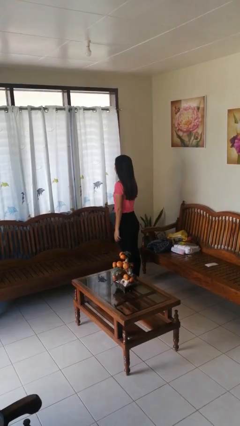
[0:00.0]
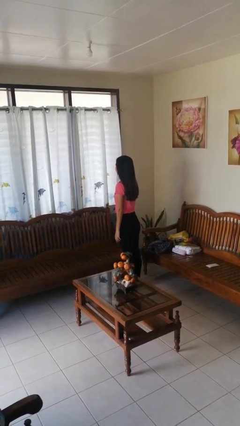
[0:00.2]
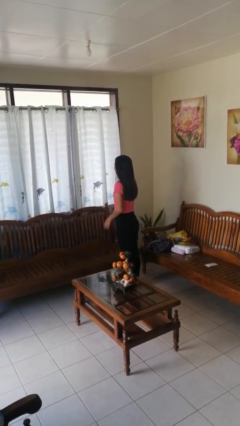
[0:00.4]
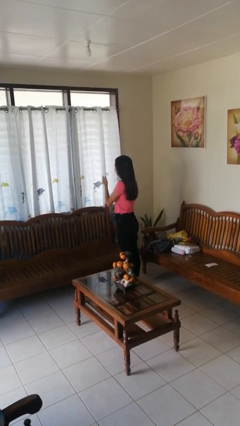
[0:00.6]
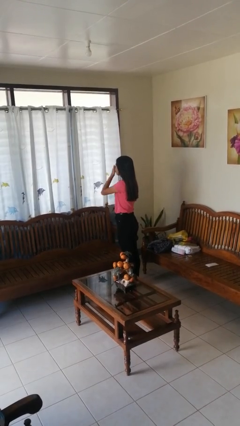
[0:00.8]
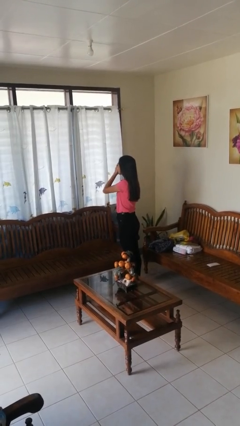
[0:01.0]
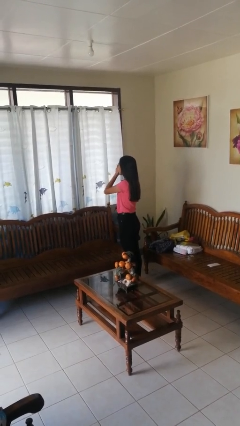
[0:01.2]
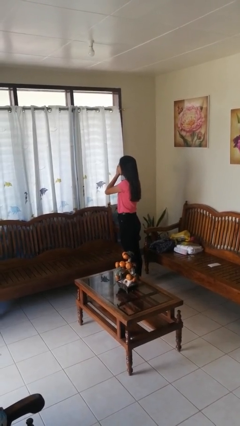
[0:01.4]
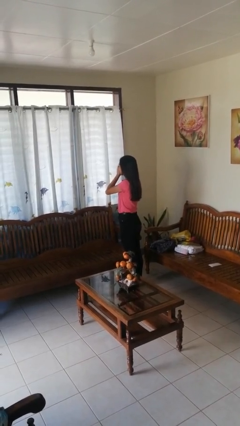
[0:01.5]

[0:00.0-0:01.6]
person yawns

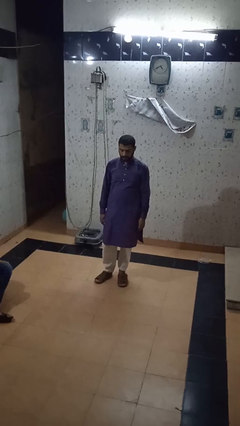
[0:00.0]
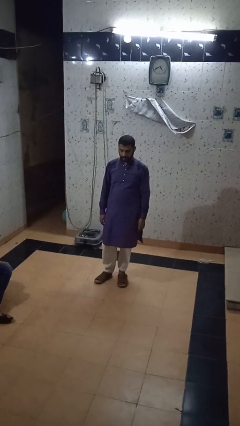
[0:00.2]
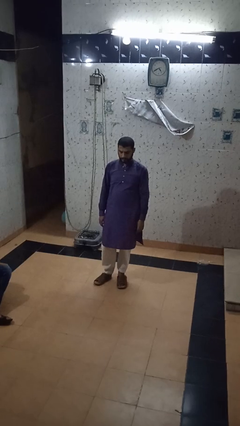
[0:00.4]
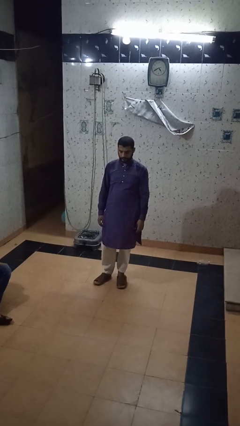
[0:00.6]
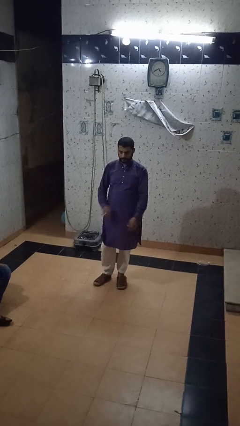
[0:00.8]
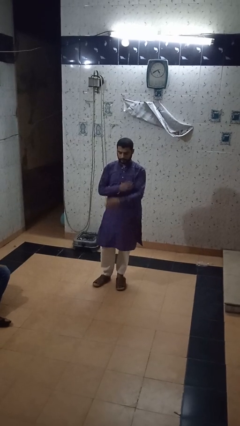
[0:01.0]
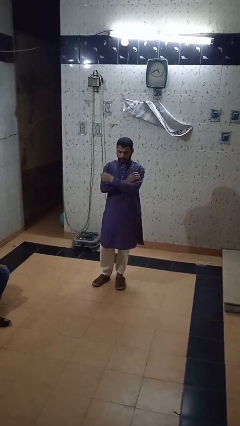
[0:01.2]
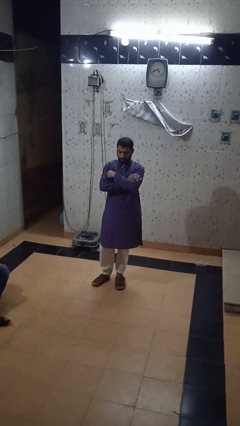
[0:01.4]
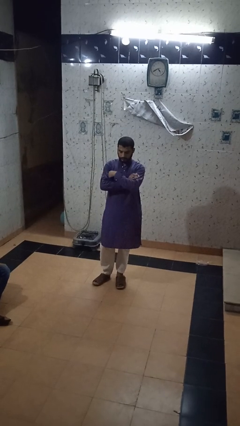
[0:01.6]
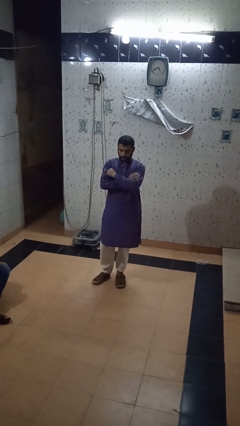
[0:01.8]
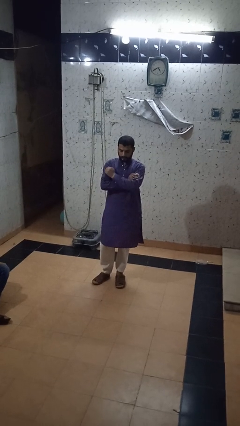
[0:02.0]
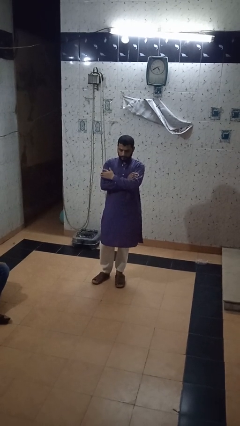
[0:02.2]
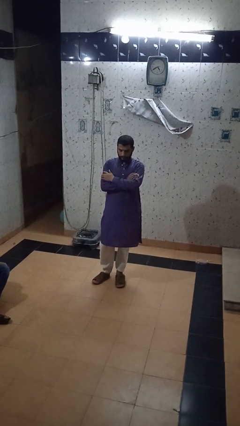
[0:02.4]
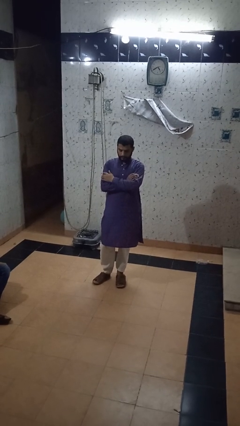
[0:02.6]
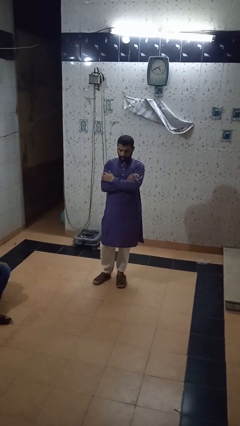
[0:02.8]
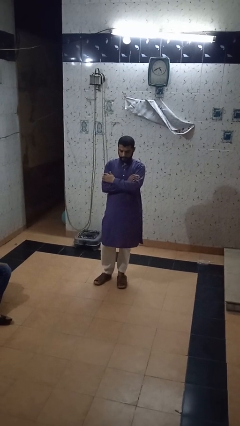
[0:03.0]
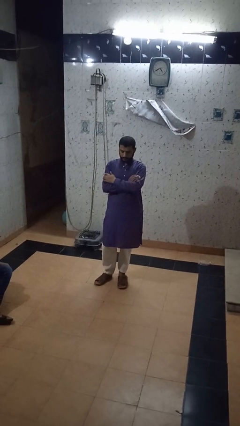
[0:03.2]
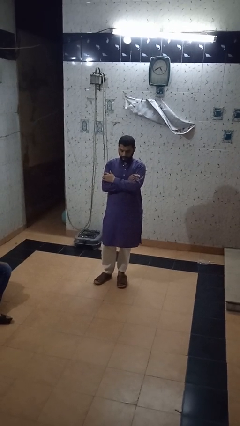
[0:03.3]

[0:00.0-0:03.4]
person crosses arms

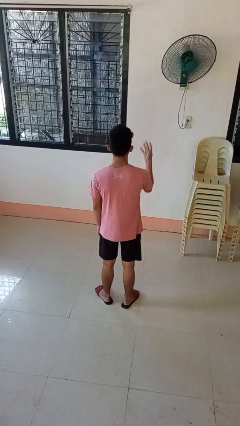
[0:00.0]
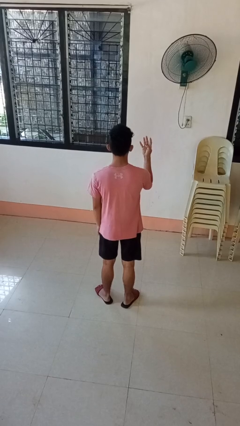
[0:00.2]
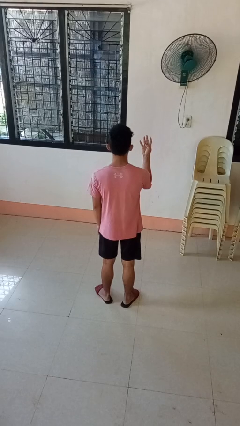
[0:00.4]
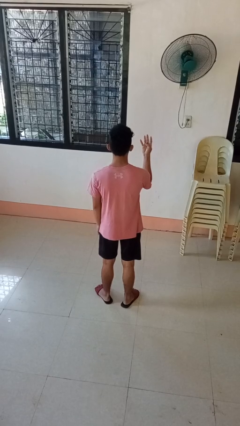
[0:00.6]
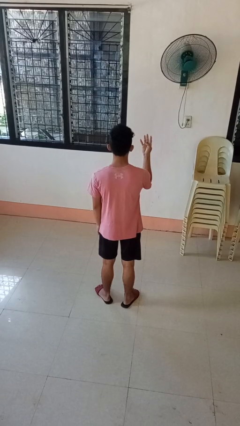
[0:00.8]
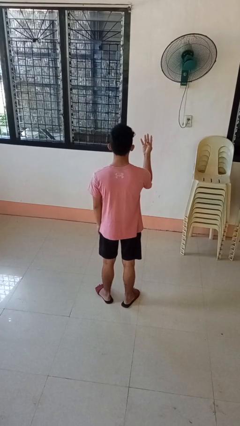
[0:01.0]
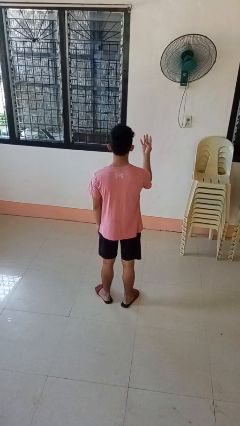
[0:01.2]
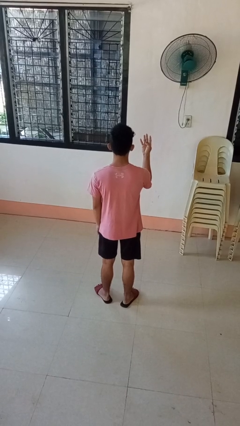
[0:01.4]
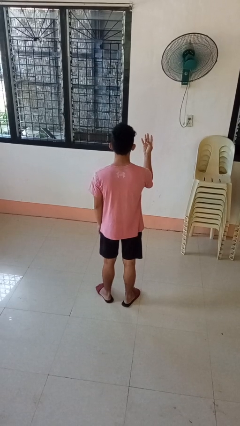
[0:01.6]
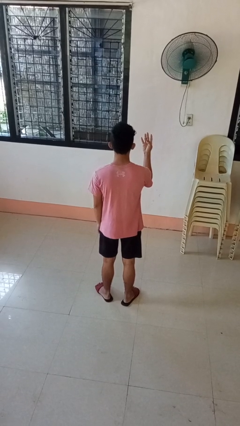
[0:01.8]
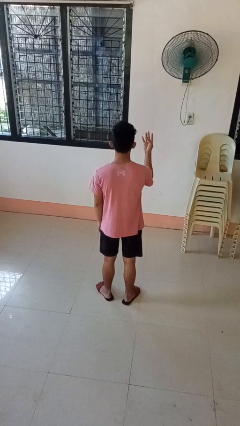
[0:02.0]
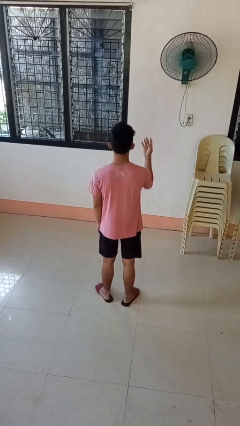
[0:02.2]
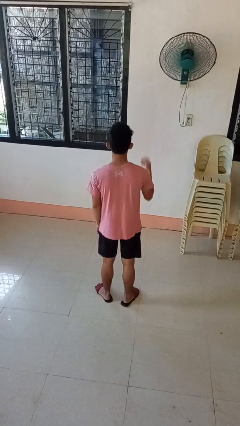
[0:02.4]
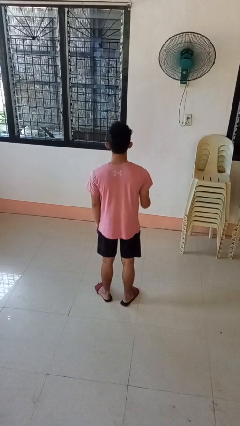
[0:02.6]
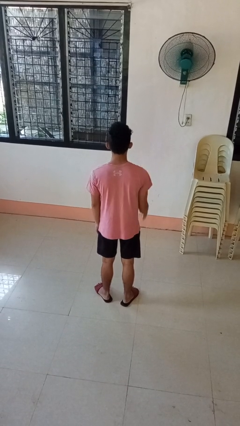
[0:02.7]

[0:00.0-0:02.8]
person gestures number four

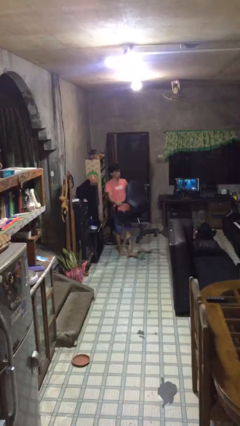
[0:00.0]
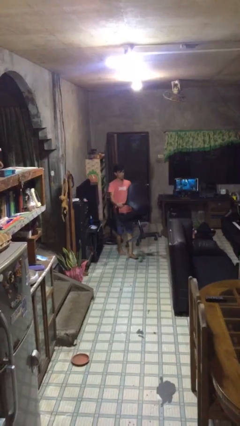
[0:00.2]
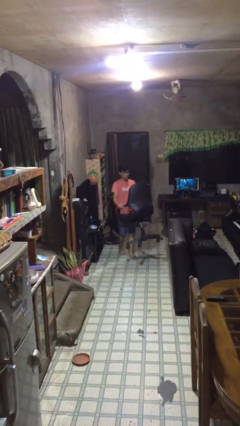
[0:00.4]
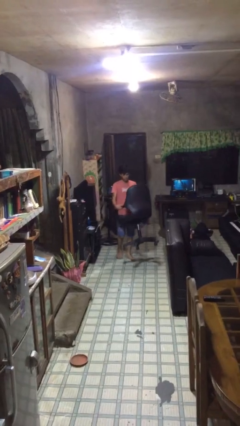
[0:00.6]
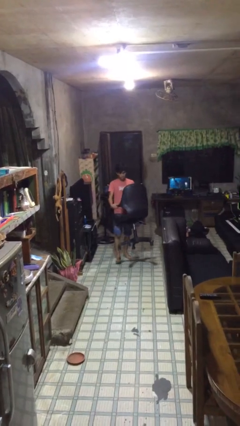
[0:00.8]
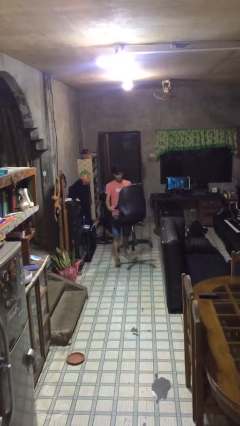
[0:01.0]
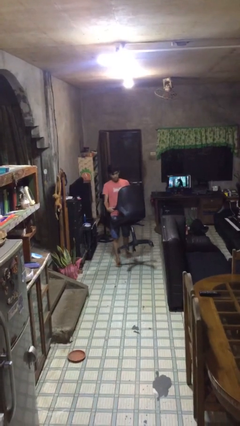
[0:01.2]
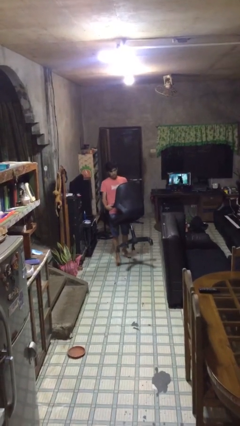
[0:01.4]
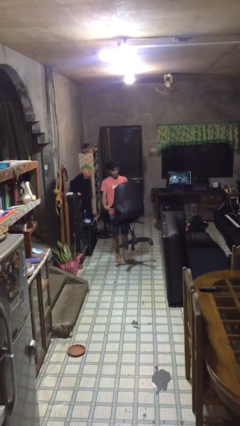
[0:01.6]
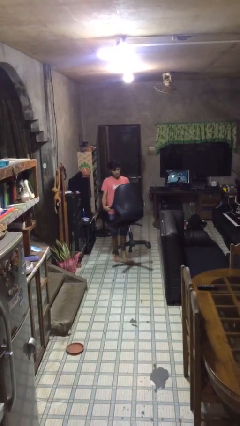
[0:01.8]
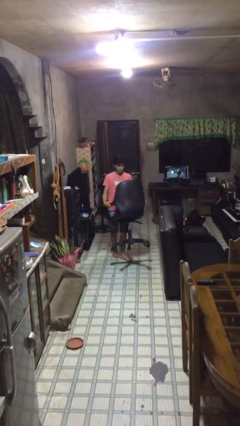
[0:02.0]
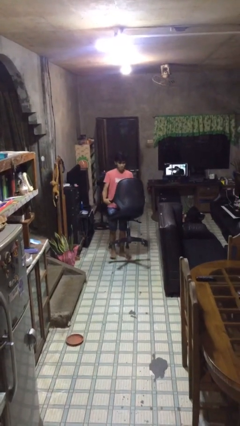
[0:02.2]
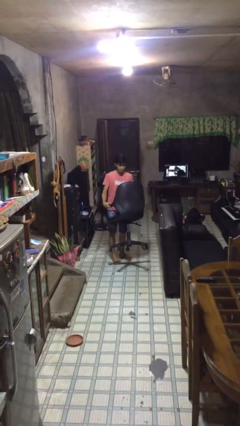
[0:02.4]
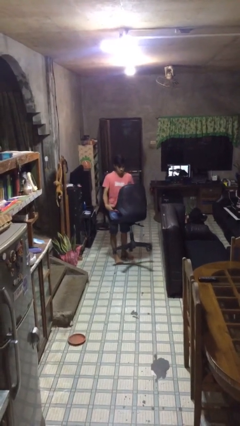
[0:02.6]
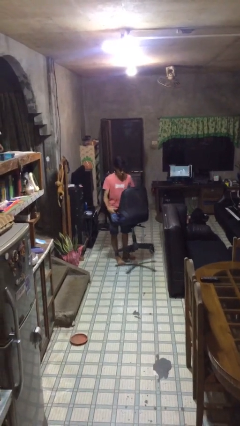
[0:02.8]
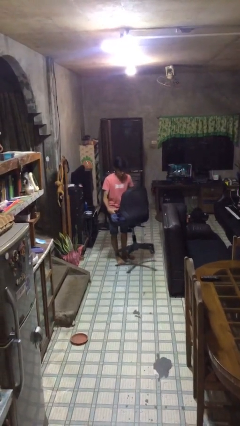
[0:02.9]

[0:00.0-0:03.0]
person carries heavy object

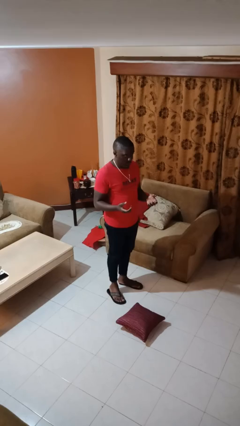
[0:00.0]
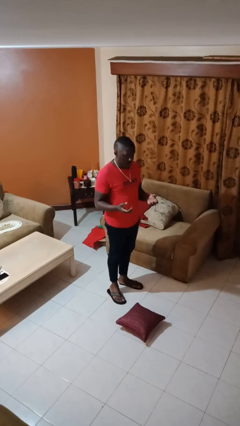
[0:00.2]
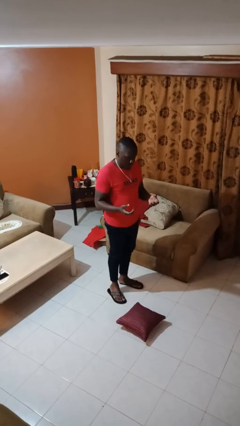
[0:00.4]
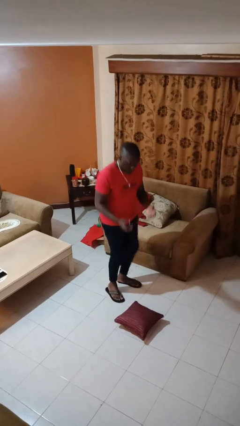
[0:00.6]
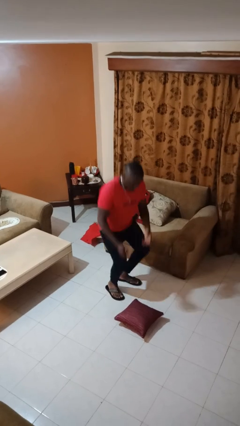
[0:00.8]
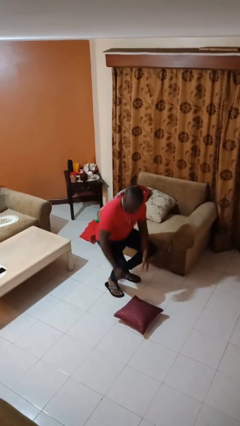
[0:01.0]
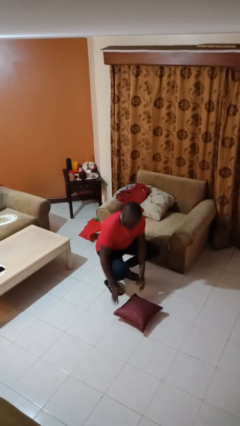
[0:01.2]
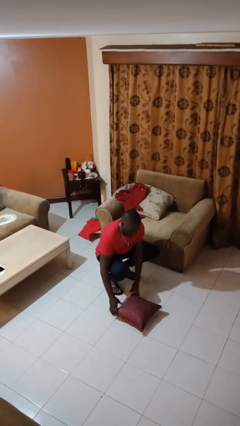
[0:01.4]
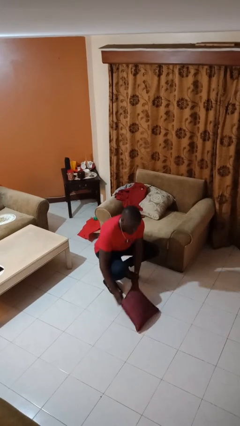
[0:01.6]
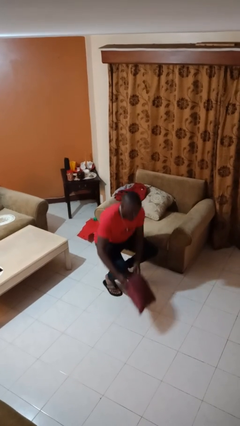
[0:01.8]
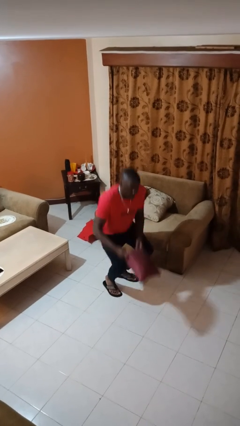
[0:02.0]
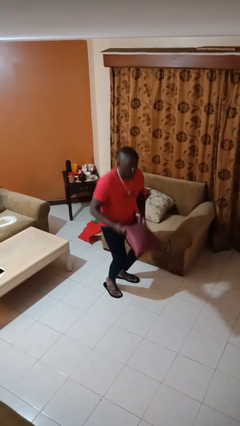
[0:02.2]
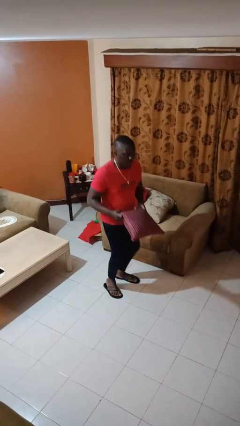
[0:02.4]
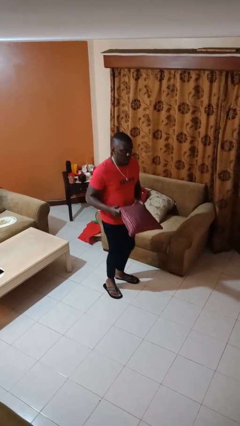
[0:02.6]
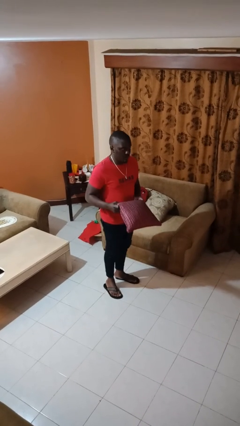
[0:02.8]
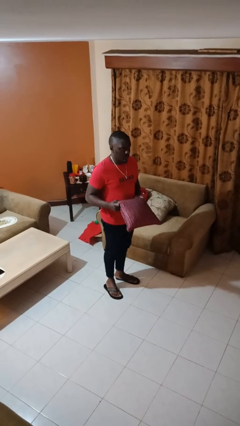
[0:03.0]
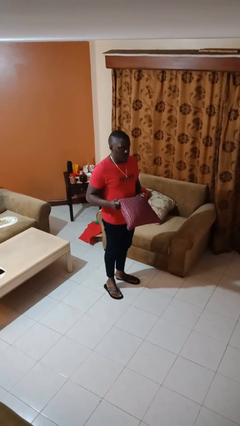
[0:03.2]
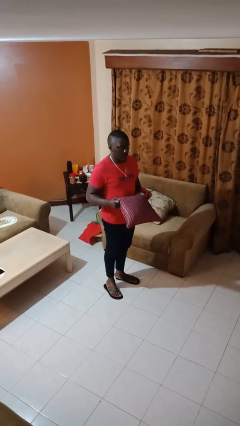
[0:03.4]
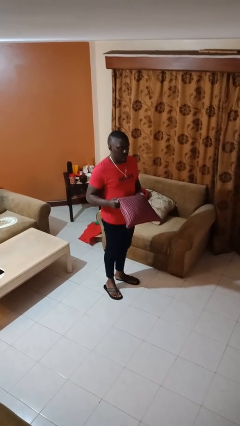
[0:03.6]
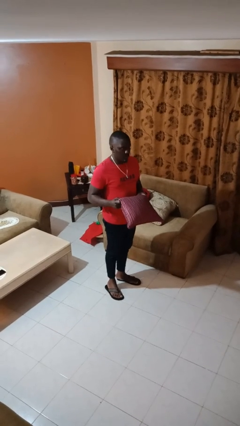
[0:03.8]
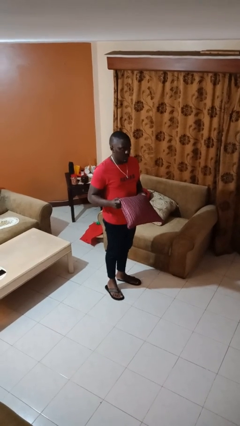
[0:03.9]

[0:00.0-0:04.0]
person picks up object from floor

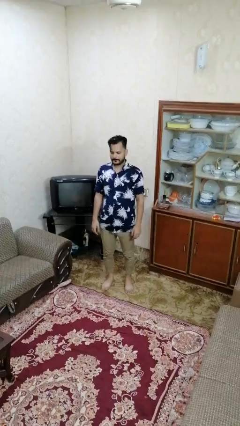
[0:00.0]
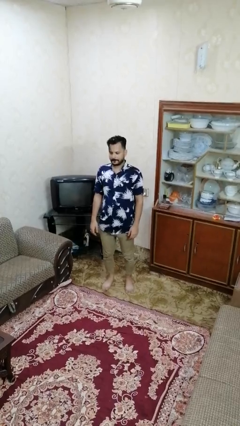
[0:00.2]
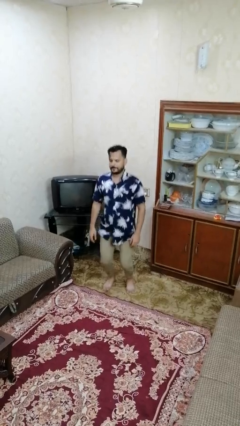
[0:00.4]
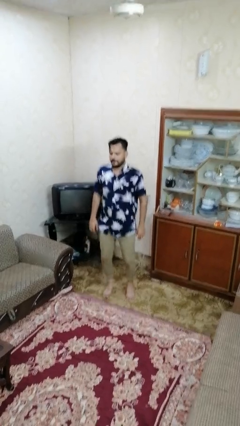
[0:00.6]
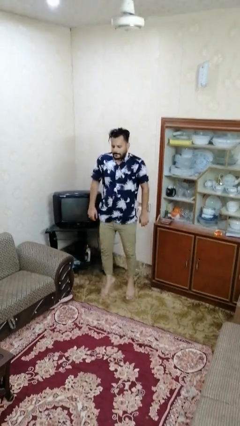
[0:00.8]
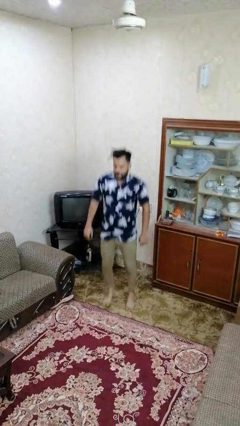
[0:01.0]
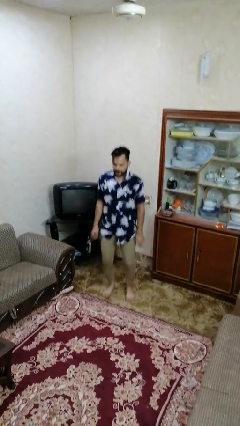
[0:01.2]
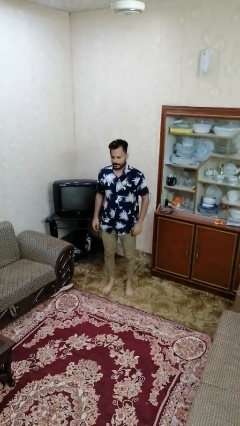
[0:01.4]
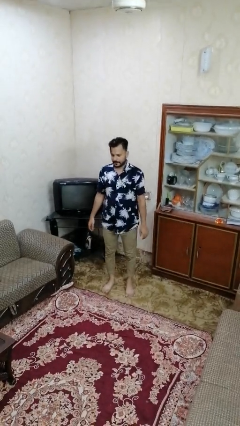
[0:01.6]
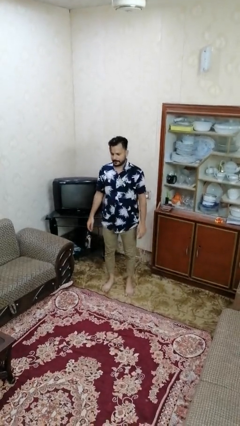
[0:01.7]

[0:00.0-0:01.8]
person jumps

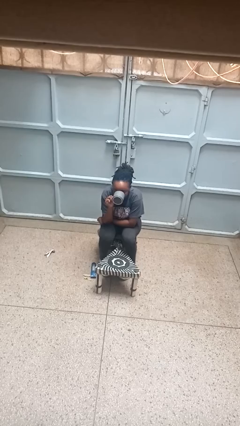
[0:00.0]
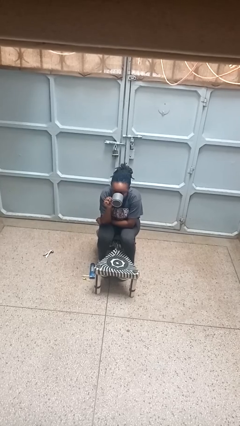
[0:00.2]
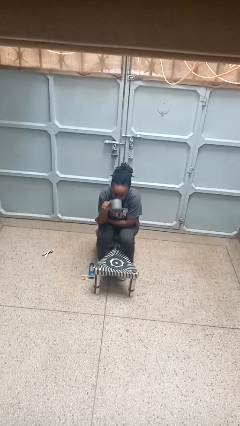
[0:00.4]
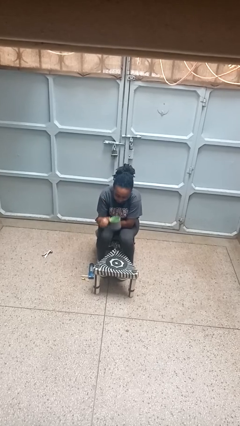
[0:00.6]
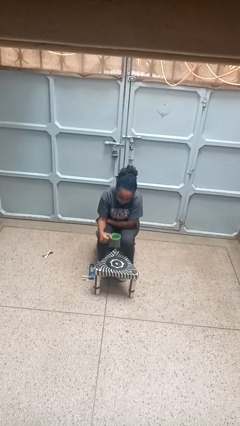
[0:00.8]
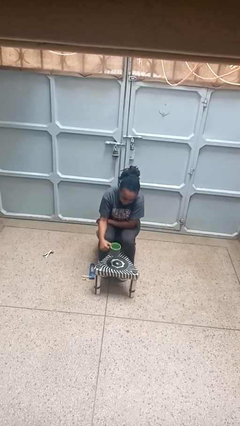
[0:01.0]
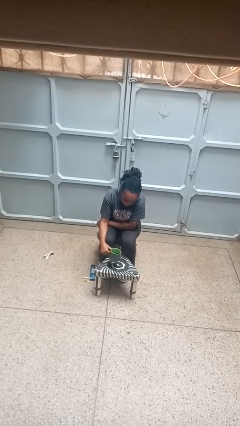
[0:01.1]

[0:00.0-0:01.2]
person puts down object on table
